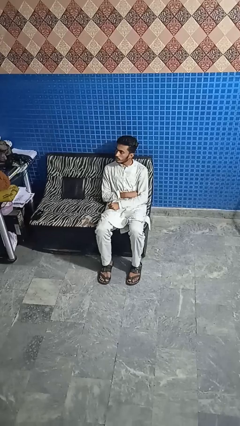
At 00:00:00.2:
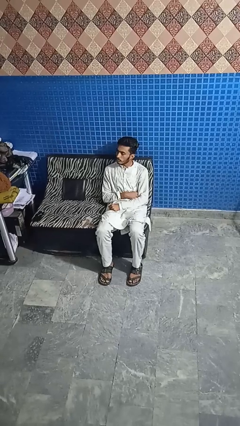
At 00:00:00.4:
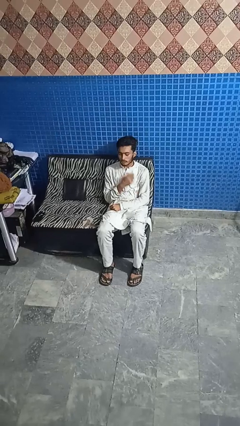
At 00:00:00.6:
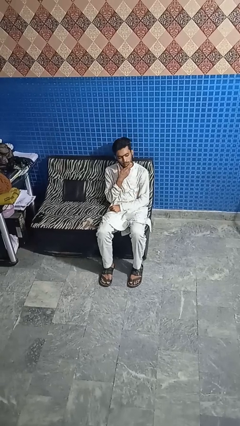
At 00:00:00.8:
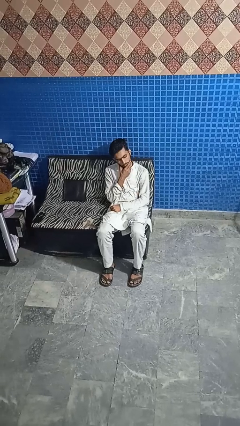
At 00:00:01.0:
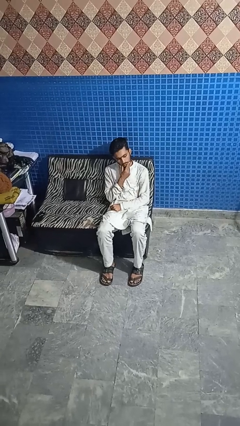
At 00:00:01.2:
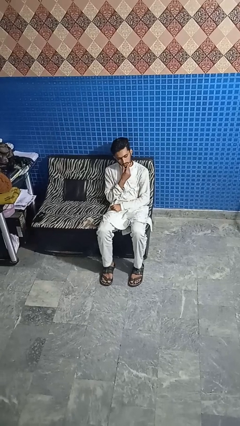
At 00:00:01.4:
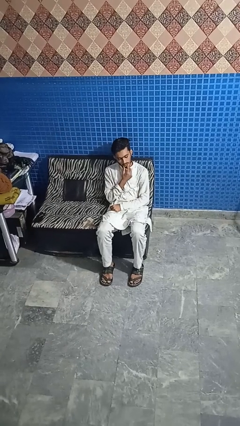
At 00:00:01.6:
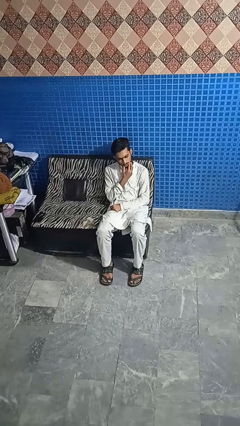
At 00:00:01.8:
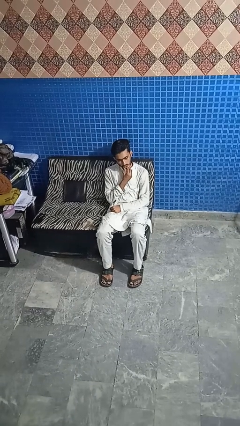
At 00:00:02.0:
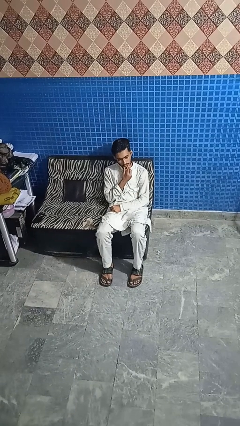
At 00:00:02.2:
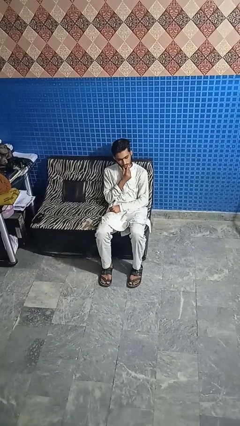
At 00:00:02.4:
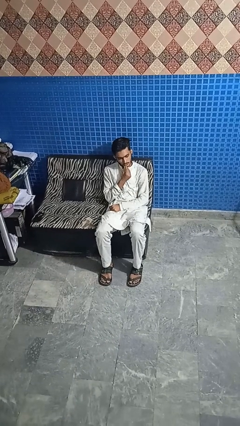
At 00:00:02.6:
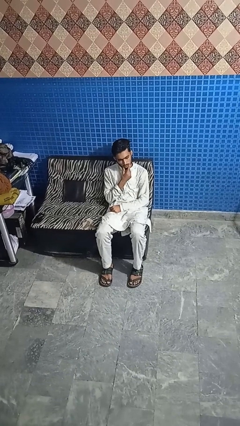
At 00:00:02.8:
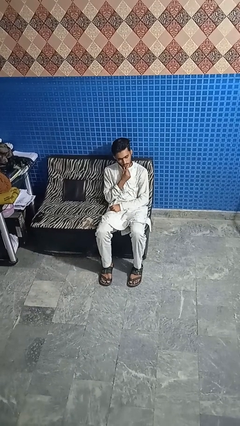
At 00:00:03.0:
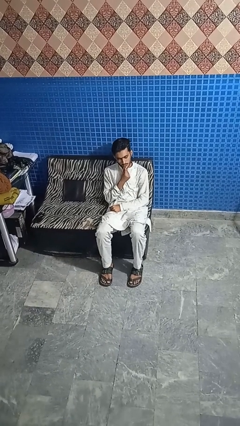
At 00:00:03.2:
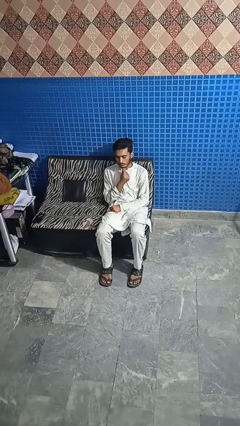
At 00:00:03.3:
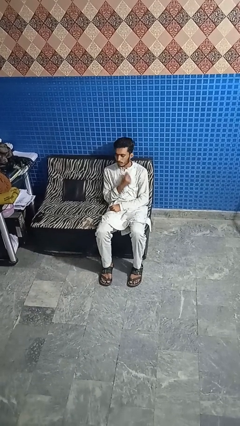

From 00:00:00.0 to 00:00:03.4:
person strokes chin

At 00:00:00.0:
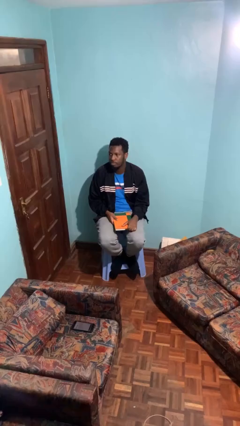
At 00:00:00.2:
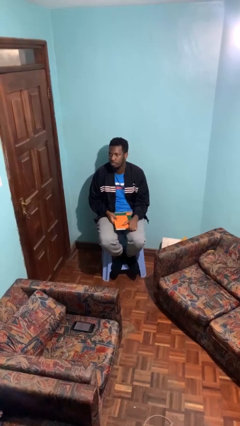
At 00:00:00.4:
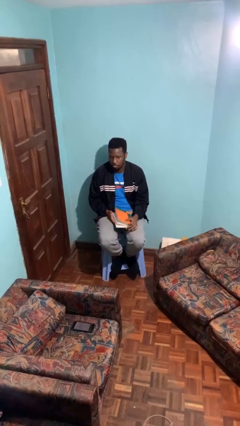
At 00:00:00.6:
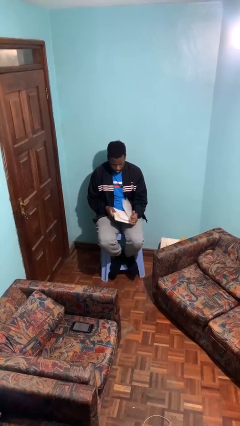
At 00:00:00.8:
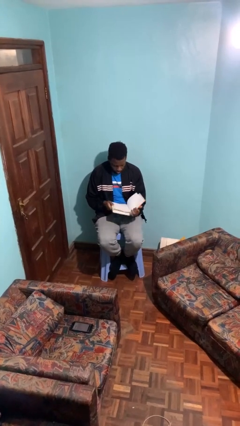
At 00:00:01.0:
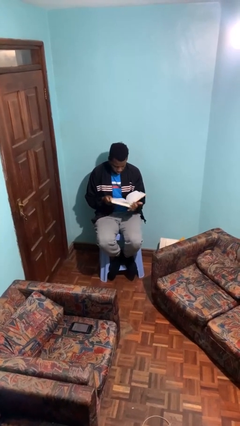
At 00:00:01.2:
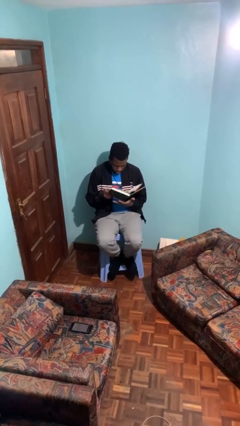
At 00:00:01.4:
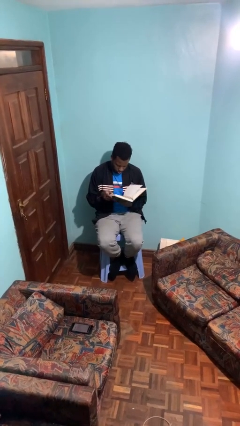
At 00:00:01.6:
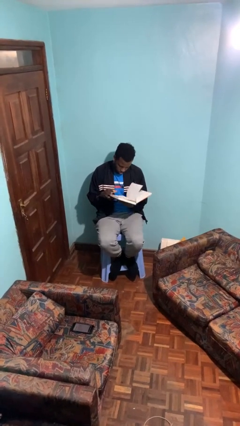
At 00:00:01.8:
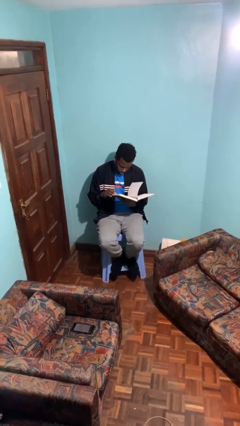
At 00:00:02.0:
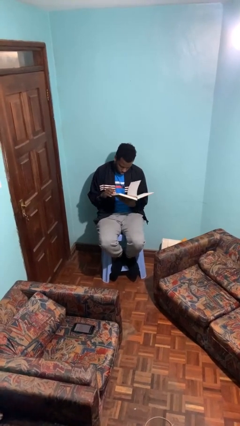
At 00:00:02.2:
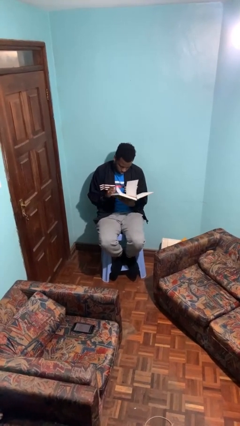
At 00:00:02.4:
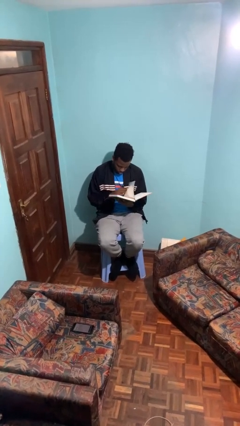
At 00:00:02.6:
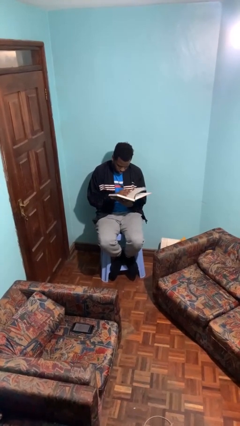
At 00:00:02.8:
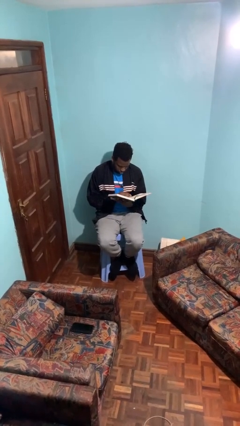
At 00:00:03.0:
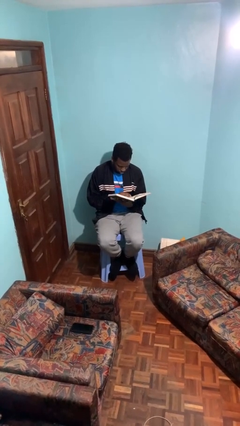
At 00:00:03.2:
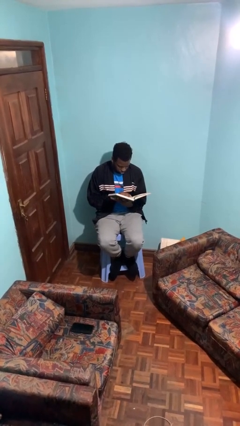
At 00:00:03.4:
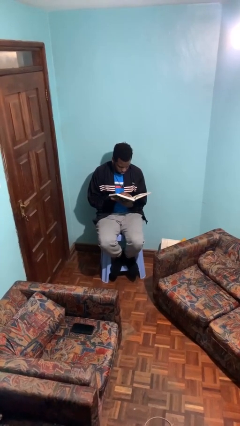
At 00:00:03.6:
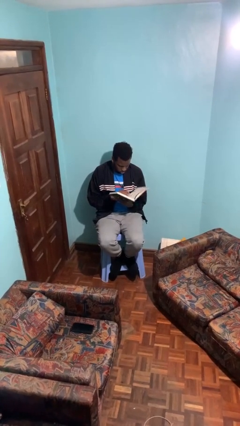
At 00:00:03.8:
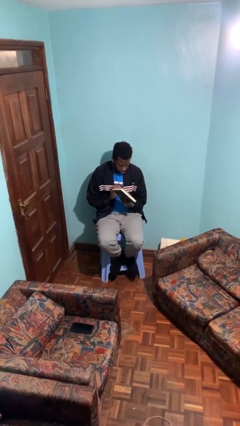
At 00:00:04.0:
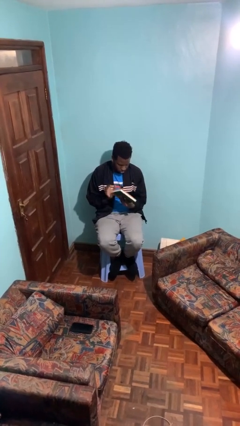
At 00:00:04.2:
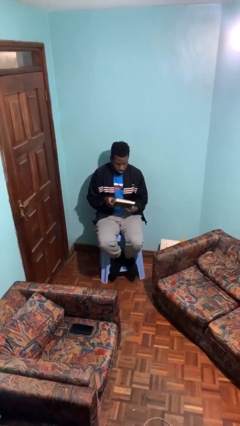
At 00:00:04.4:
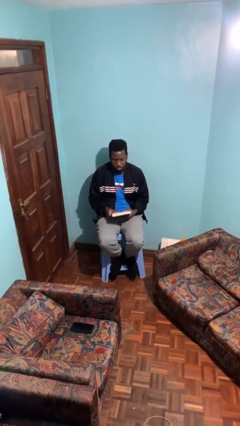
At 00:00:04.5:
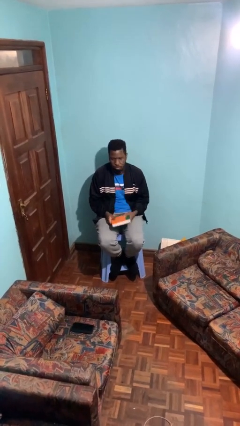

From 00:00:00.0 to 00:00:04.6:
person reads book

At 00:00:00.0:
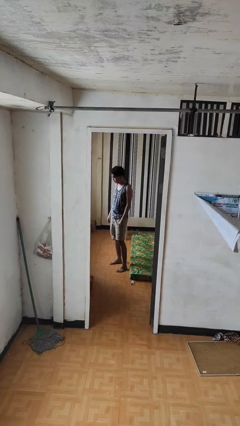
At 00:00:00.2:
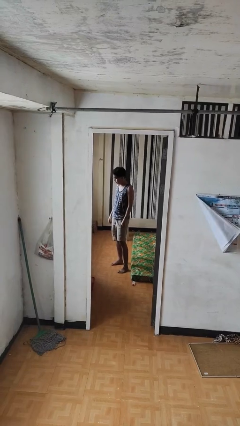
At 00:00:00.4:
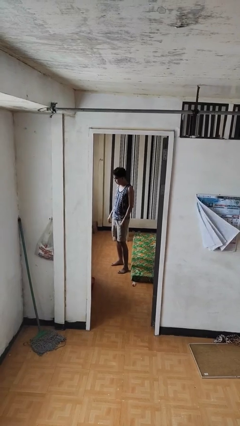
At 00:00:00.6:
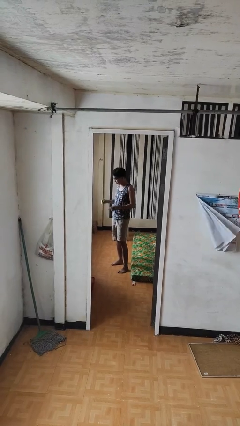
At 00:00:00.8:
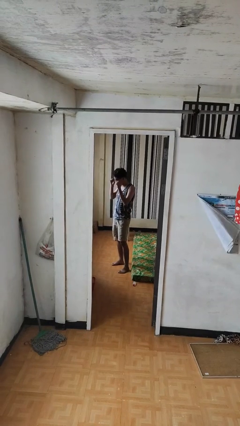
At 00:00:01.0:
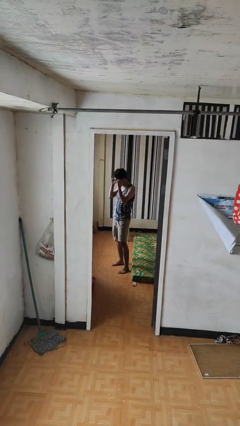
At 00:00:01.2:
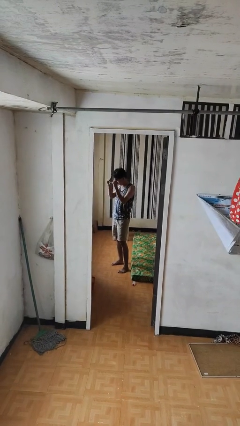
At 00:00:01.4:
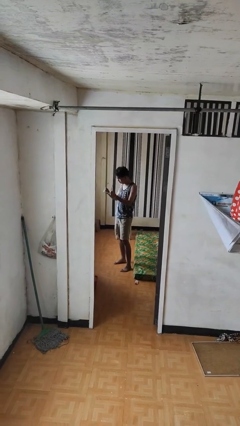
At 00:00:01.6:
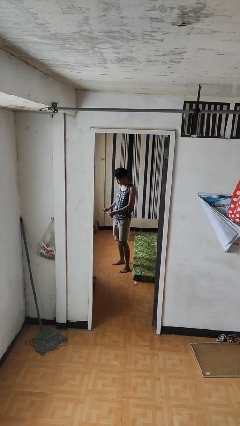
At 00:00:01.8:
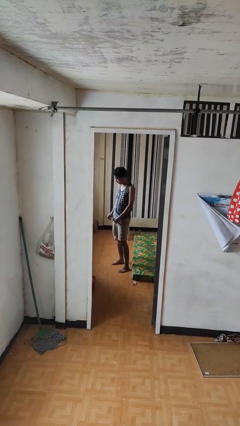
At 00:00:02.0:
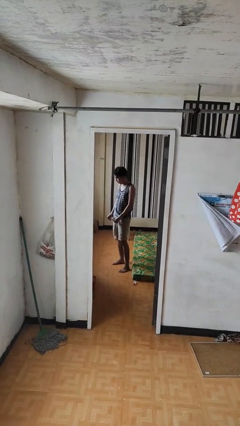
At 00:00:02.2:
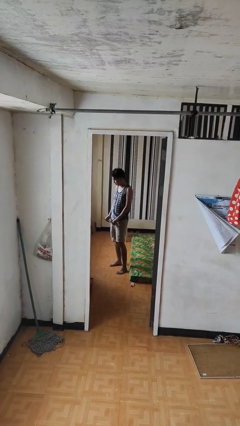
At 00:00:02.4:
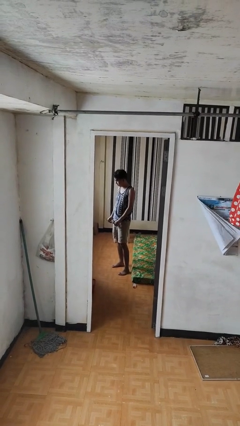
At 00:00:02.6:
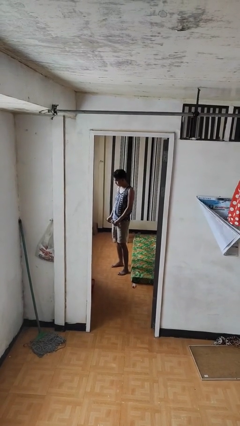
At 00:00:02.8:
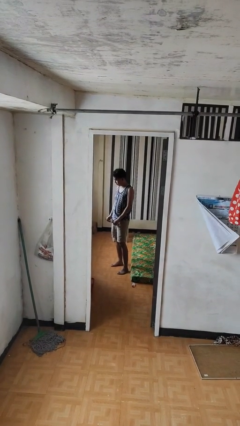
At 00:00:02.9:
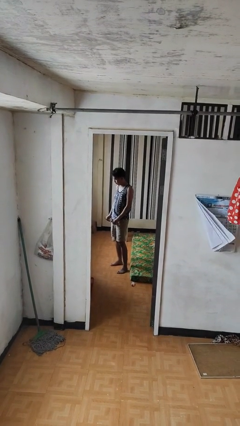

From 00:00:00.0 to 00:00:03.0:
person takes off glasses

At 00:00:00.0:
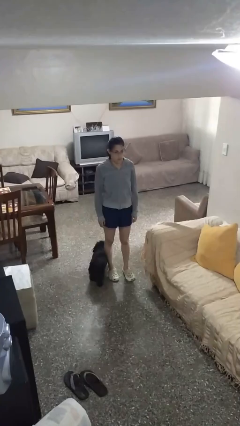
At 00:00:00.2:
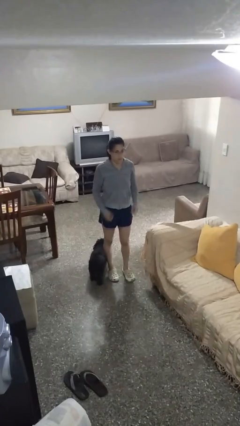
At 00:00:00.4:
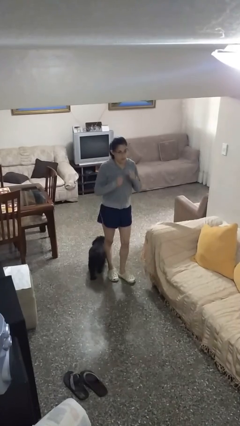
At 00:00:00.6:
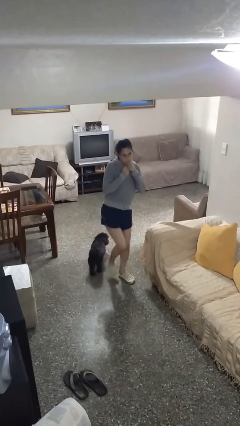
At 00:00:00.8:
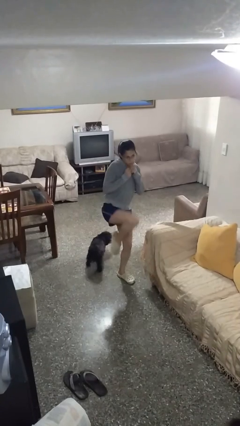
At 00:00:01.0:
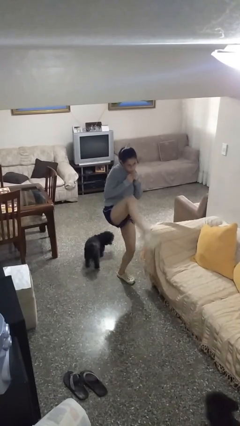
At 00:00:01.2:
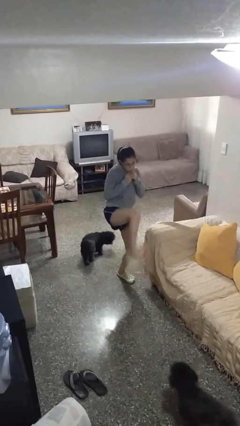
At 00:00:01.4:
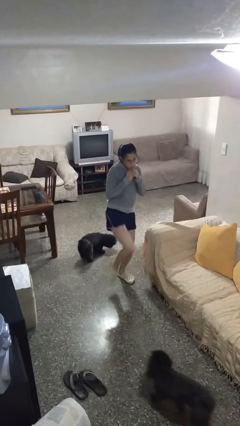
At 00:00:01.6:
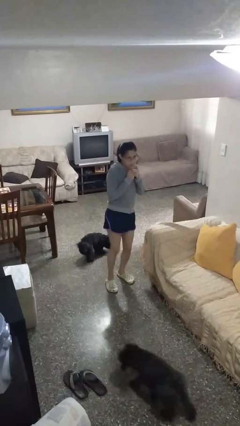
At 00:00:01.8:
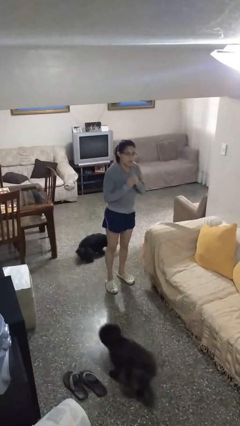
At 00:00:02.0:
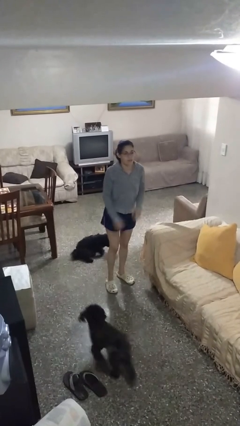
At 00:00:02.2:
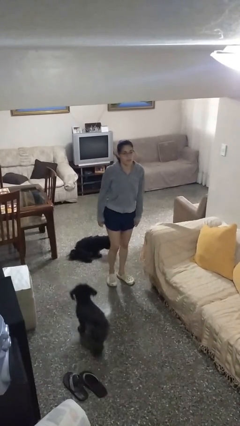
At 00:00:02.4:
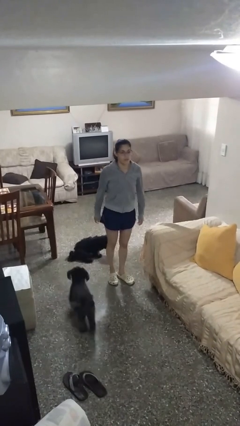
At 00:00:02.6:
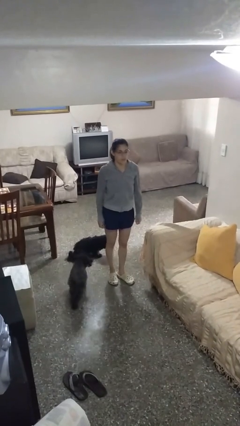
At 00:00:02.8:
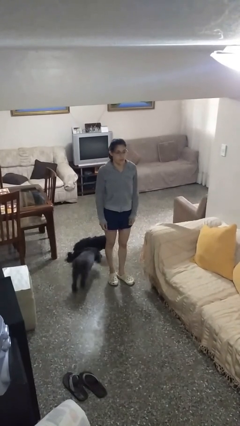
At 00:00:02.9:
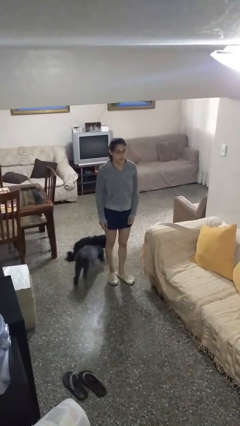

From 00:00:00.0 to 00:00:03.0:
person karate kicks

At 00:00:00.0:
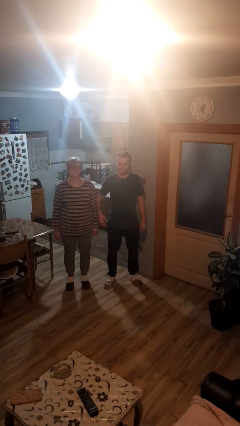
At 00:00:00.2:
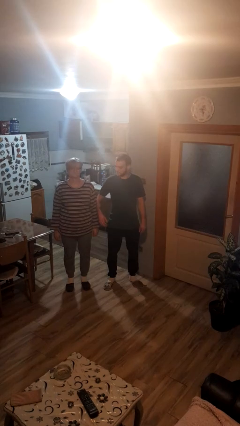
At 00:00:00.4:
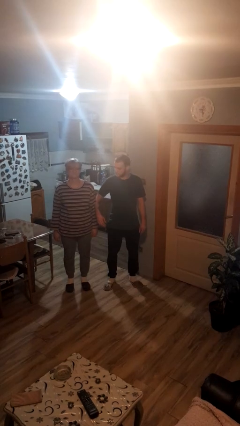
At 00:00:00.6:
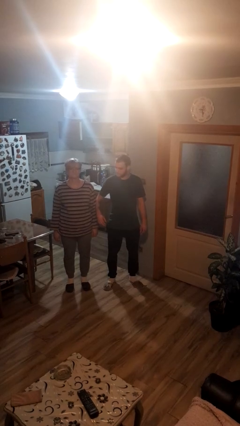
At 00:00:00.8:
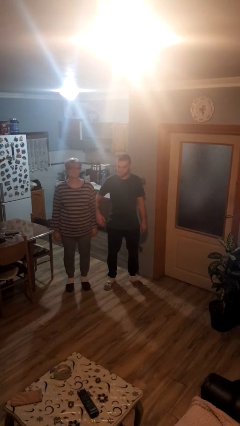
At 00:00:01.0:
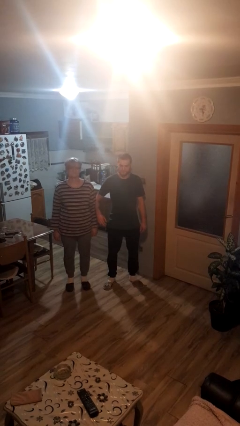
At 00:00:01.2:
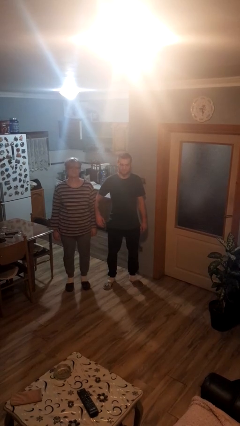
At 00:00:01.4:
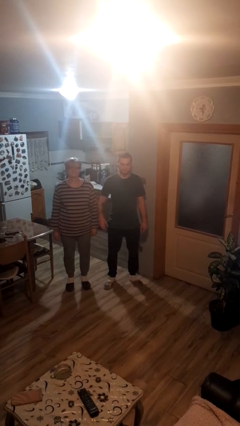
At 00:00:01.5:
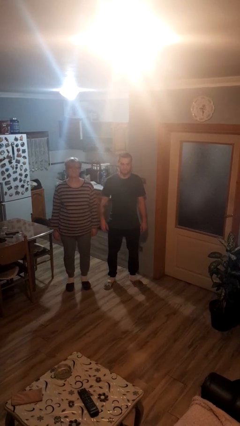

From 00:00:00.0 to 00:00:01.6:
person nudges person with elbow

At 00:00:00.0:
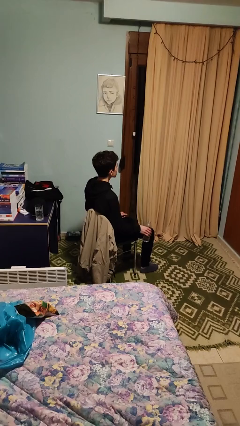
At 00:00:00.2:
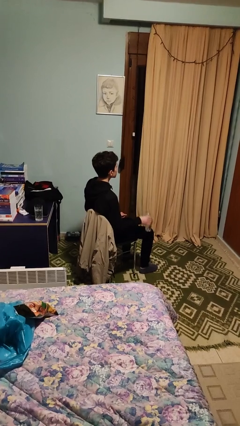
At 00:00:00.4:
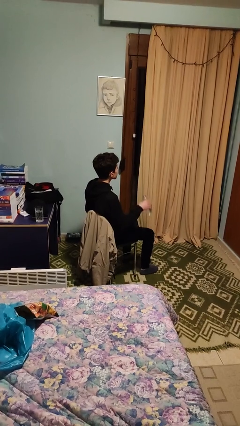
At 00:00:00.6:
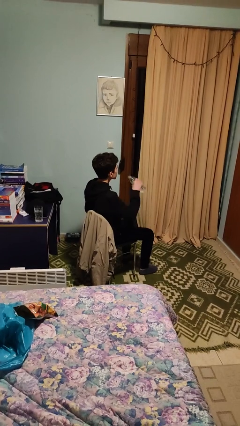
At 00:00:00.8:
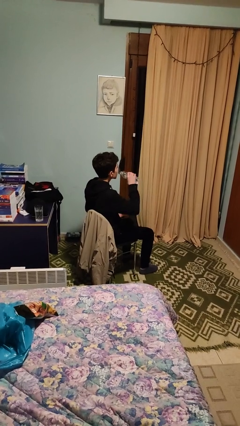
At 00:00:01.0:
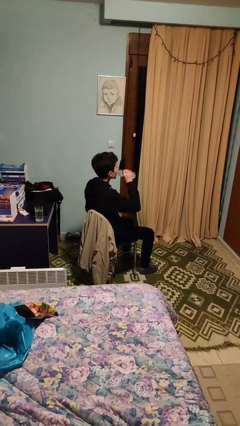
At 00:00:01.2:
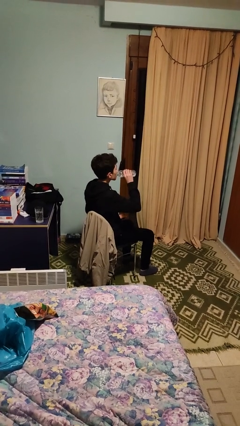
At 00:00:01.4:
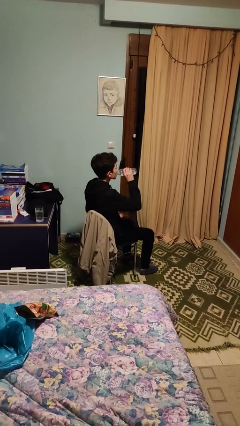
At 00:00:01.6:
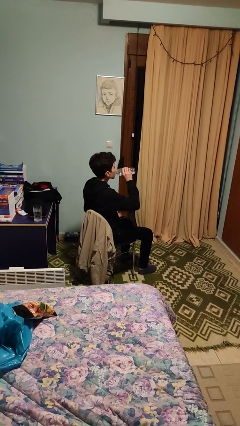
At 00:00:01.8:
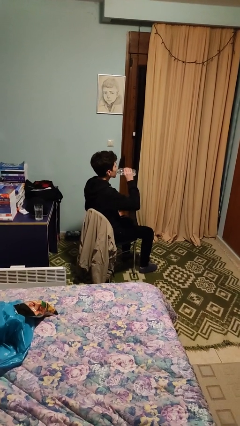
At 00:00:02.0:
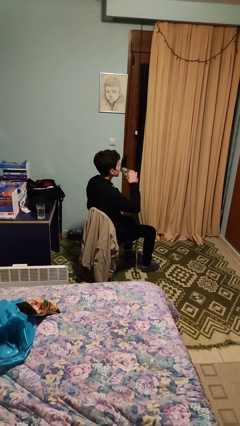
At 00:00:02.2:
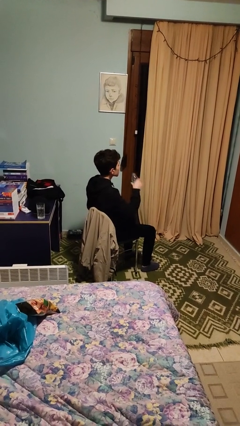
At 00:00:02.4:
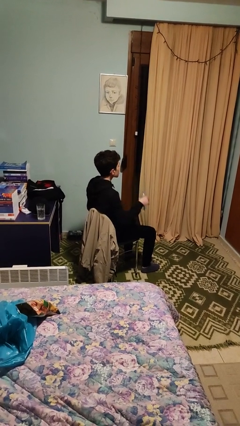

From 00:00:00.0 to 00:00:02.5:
person drinks from bottle
